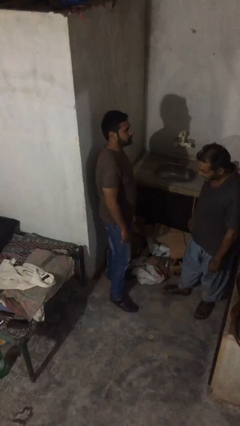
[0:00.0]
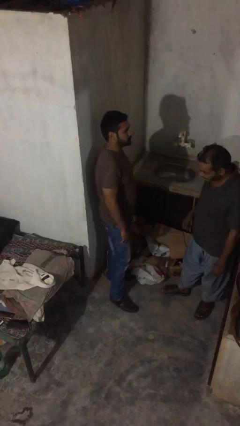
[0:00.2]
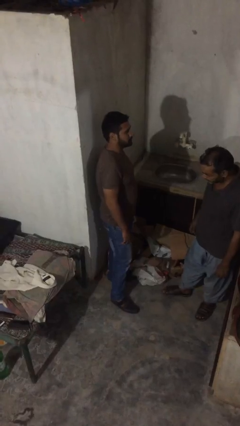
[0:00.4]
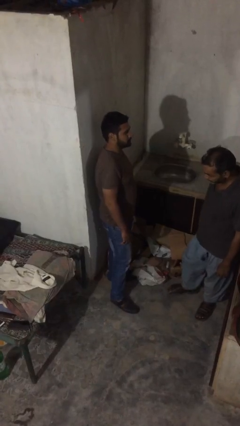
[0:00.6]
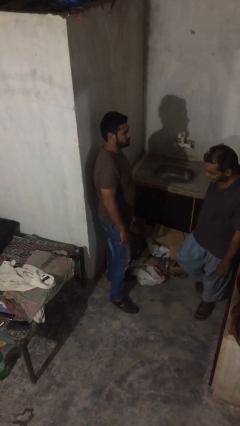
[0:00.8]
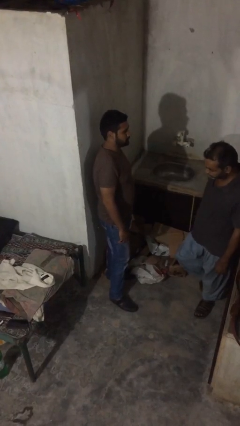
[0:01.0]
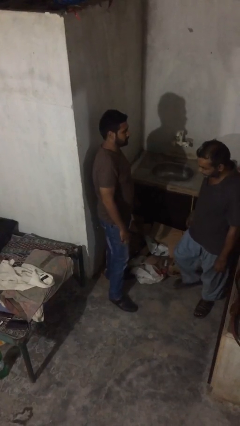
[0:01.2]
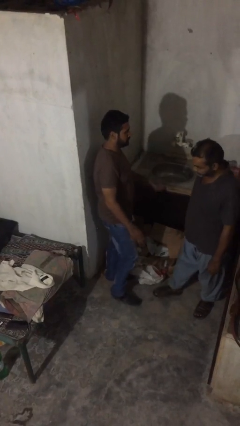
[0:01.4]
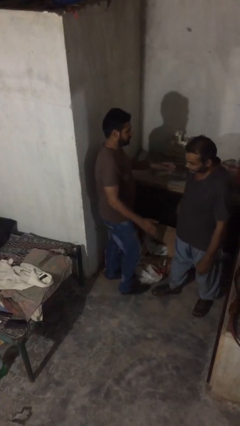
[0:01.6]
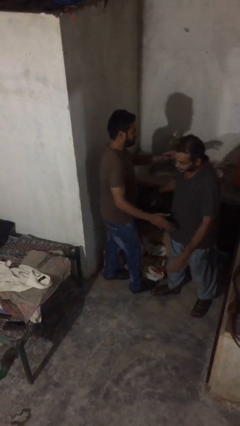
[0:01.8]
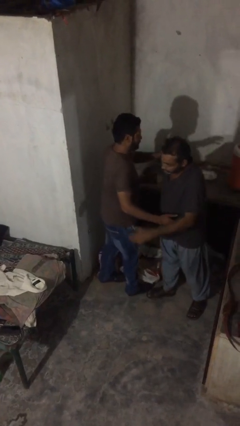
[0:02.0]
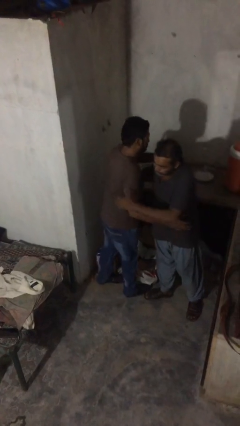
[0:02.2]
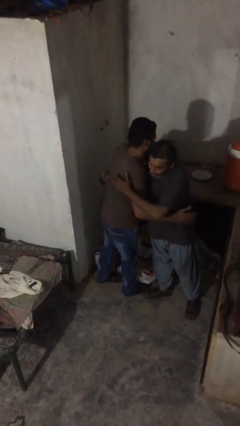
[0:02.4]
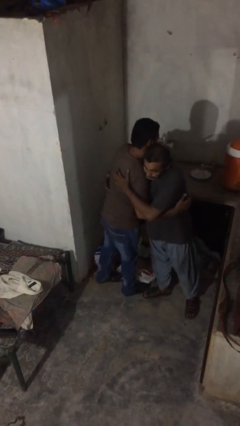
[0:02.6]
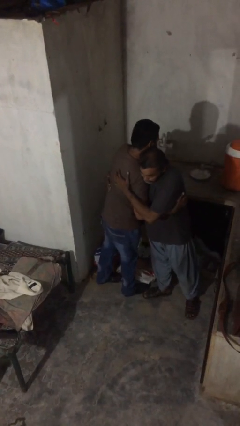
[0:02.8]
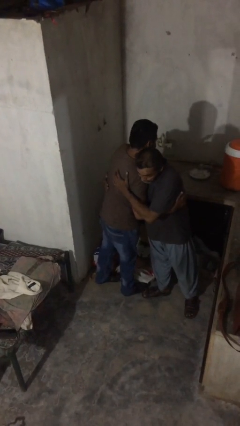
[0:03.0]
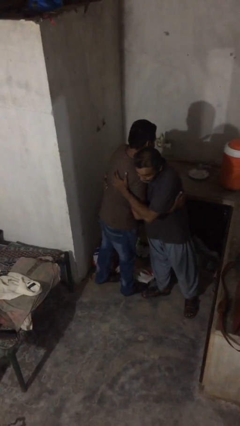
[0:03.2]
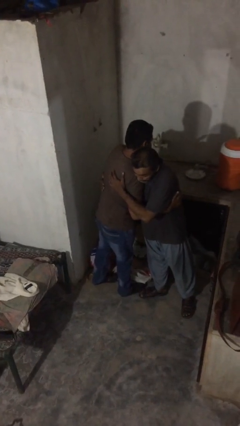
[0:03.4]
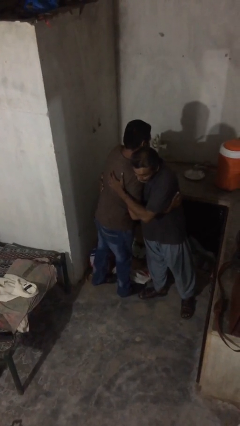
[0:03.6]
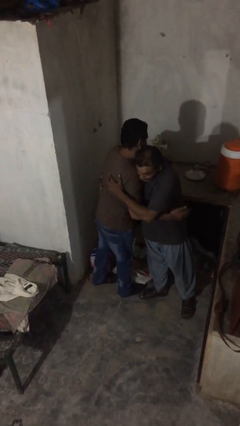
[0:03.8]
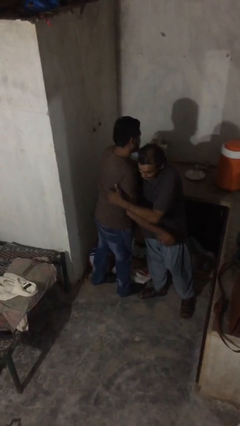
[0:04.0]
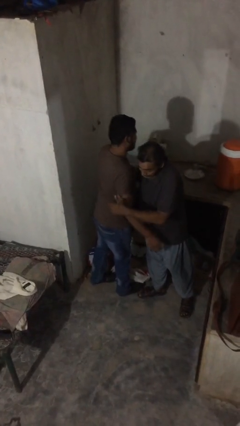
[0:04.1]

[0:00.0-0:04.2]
person embraces person

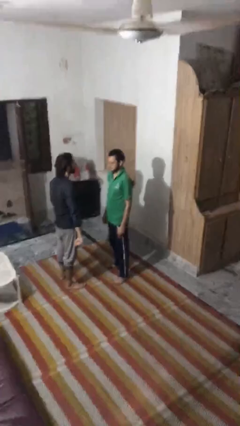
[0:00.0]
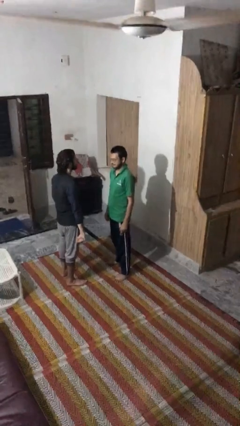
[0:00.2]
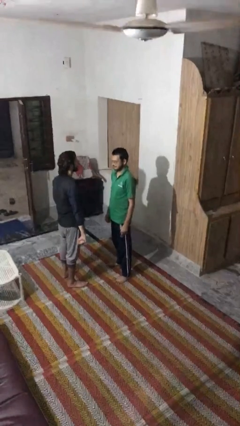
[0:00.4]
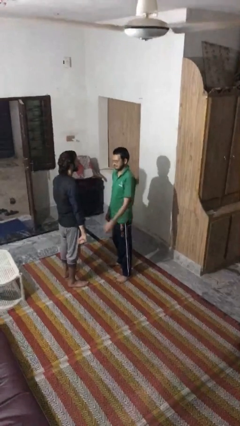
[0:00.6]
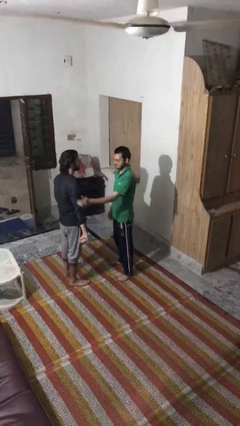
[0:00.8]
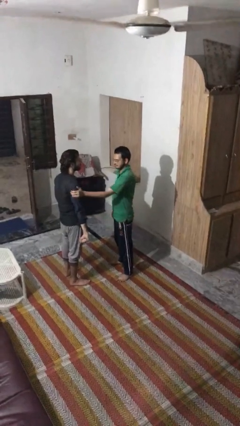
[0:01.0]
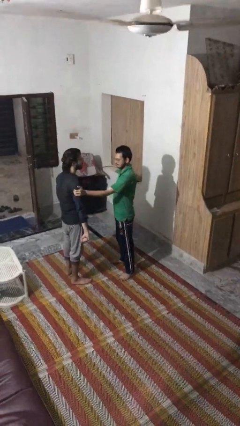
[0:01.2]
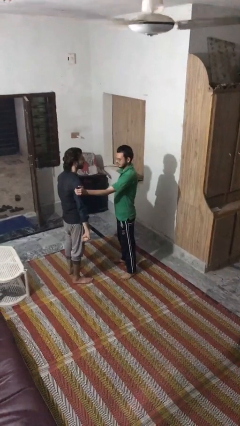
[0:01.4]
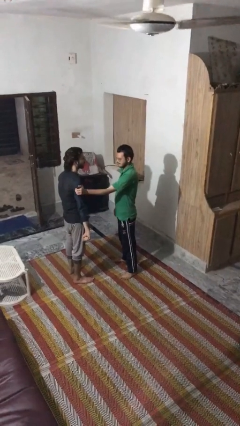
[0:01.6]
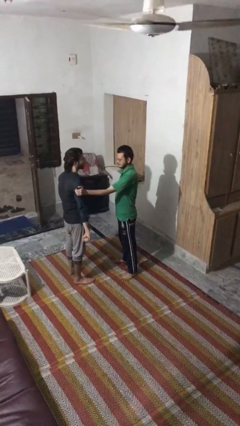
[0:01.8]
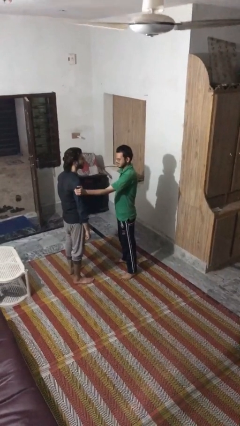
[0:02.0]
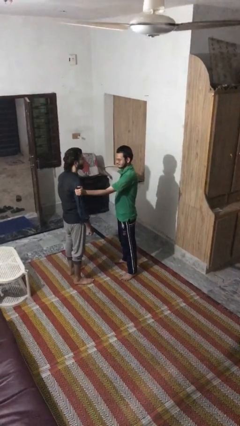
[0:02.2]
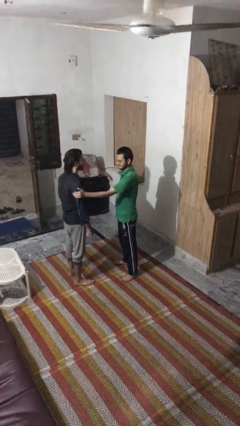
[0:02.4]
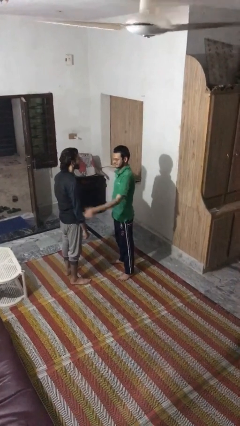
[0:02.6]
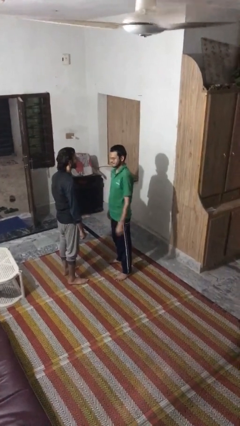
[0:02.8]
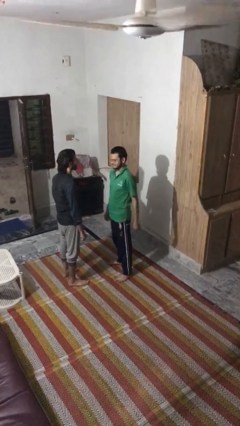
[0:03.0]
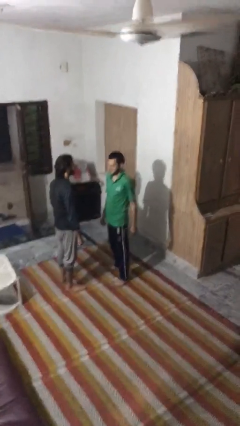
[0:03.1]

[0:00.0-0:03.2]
person grabs person by bicep

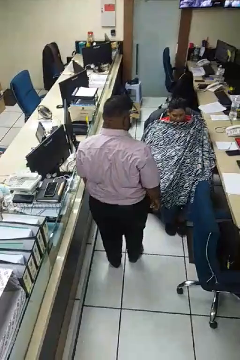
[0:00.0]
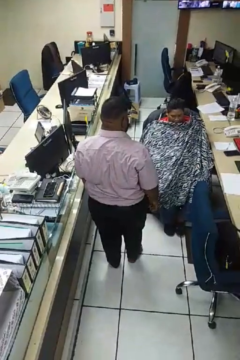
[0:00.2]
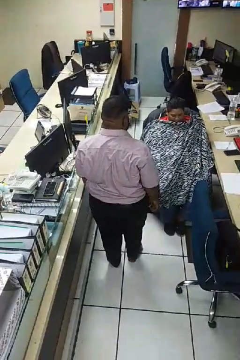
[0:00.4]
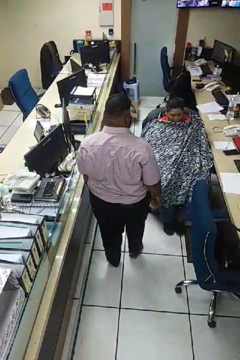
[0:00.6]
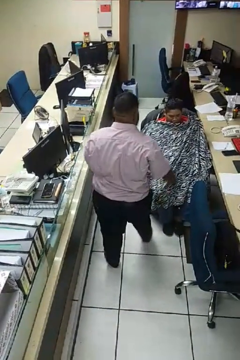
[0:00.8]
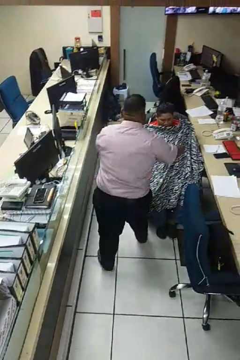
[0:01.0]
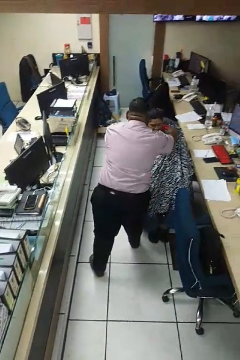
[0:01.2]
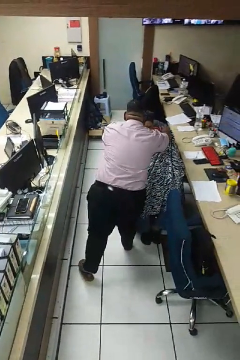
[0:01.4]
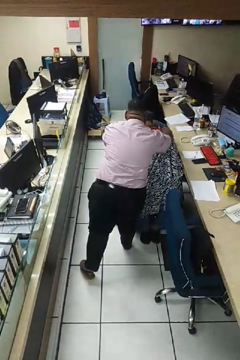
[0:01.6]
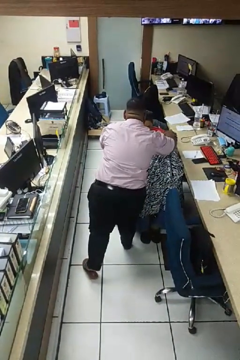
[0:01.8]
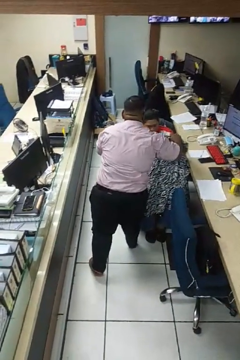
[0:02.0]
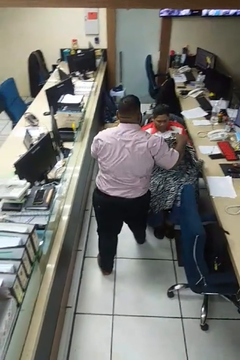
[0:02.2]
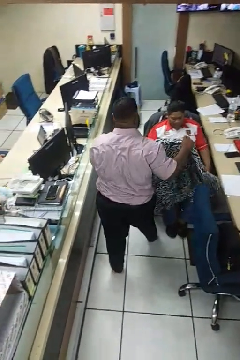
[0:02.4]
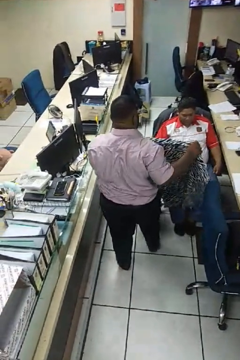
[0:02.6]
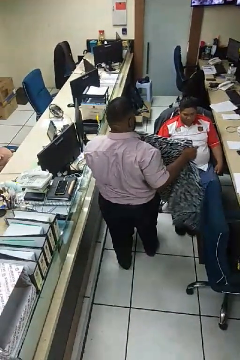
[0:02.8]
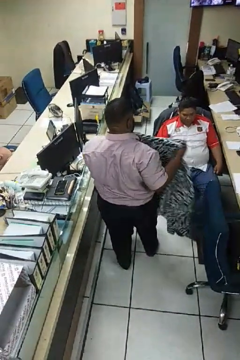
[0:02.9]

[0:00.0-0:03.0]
person uncovers friend with blanket

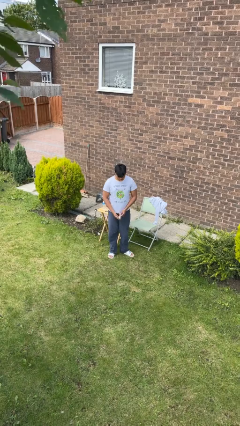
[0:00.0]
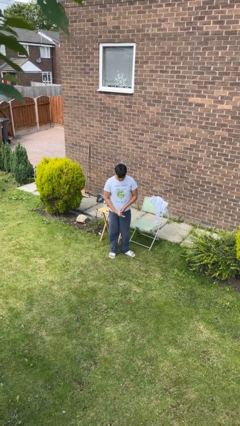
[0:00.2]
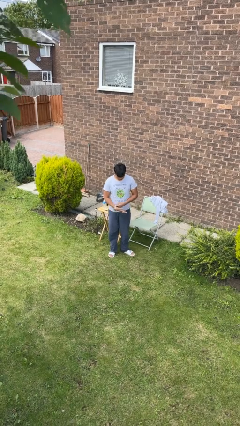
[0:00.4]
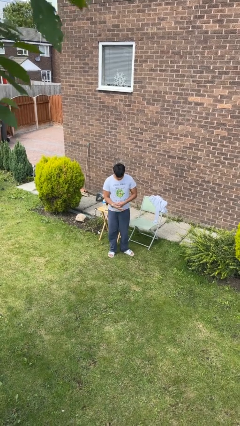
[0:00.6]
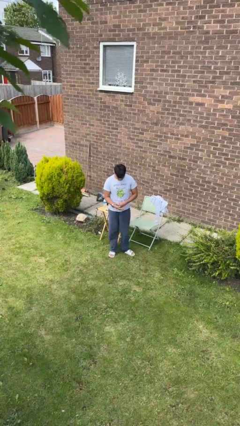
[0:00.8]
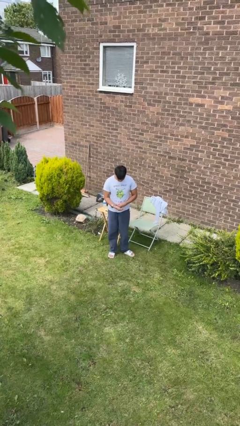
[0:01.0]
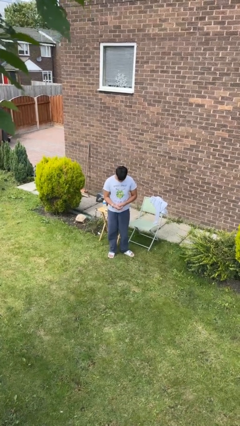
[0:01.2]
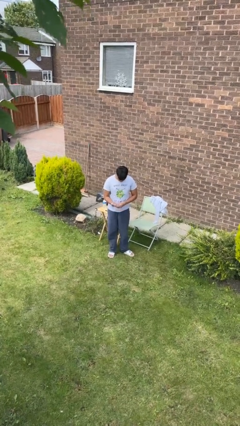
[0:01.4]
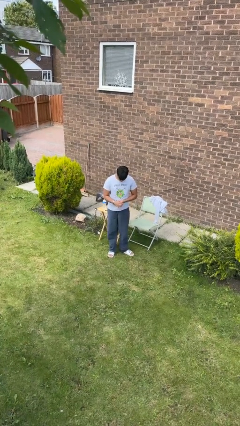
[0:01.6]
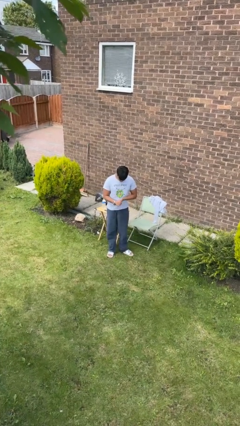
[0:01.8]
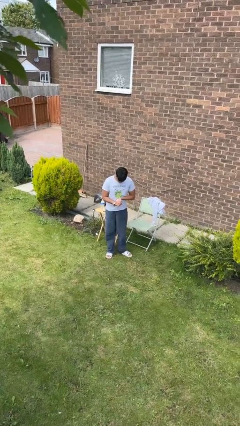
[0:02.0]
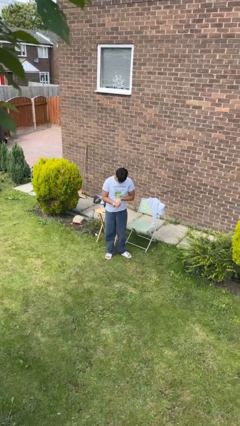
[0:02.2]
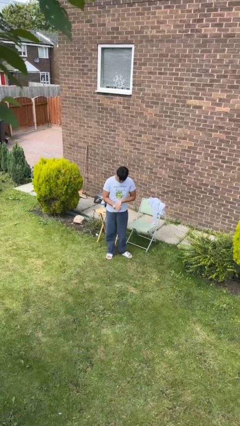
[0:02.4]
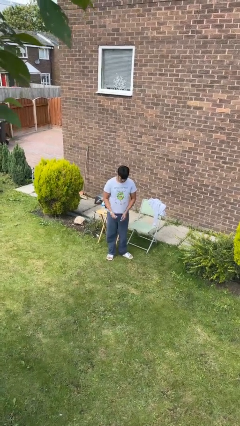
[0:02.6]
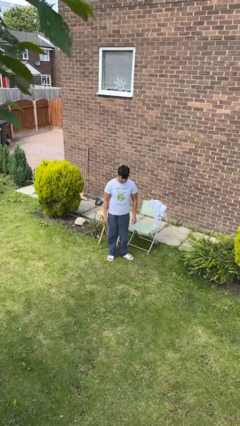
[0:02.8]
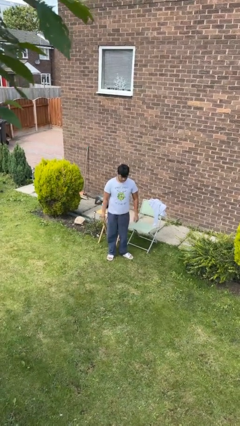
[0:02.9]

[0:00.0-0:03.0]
person puts on wristwatch

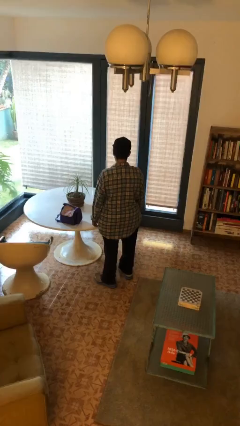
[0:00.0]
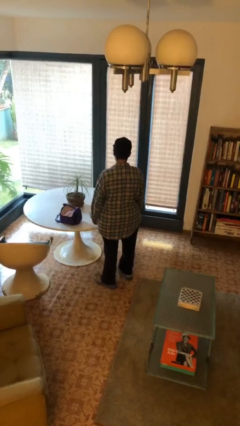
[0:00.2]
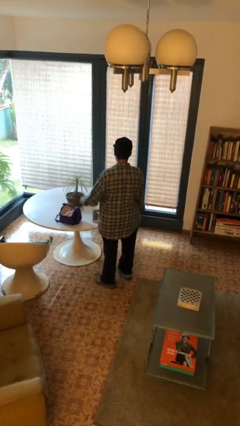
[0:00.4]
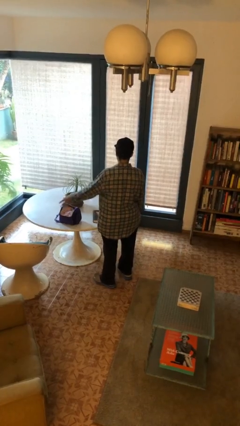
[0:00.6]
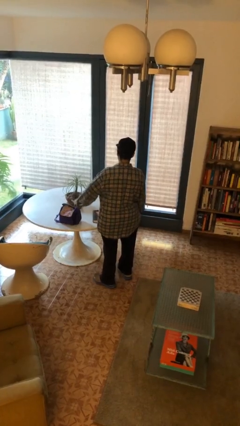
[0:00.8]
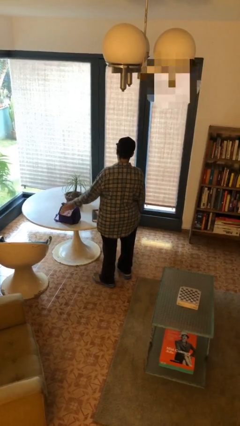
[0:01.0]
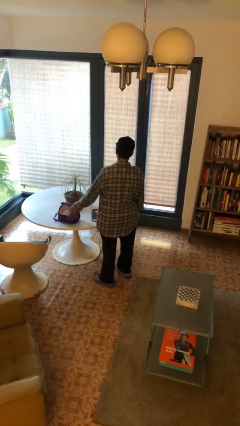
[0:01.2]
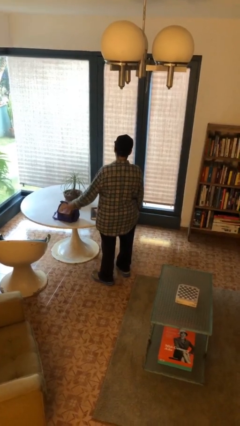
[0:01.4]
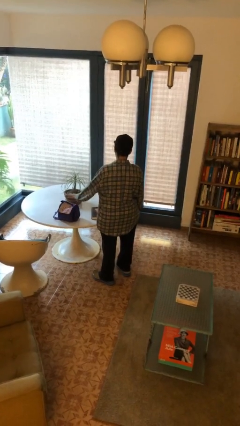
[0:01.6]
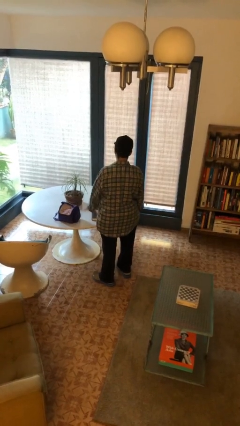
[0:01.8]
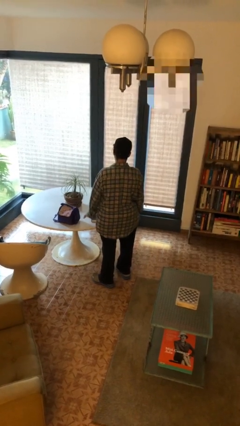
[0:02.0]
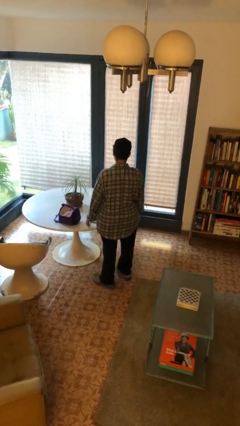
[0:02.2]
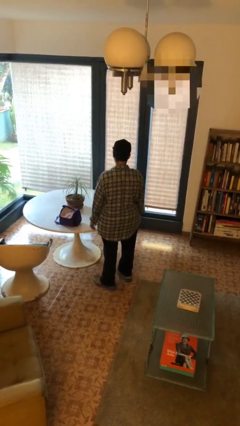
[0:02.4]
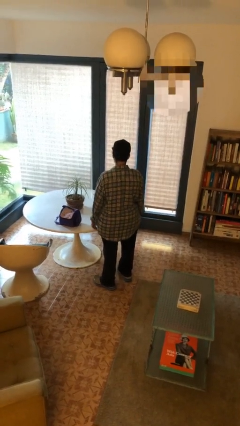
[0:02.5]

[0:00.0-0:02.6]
person waves hand over object

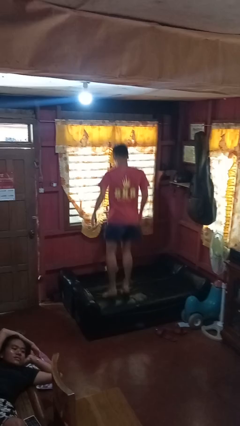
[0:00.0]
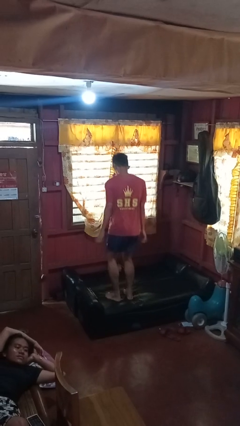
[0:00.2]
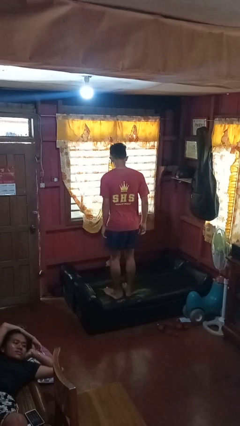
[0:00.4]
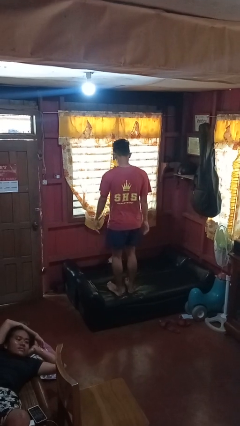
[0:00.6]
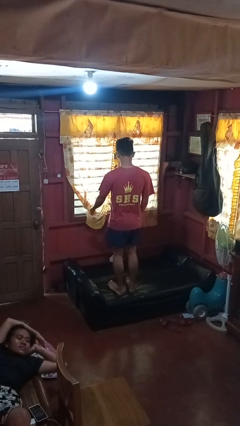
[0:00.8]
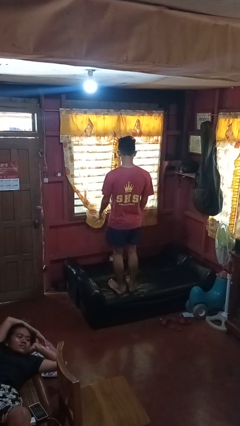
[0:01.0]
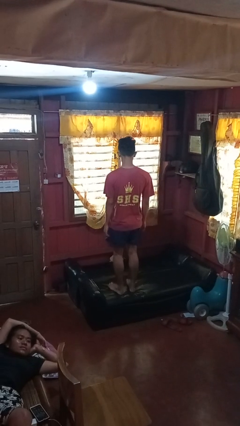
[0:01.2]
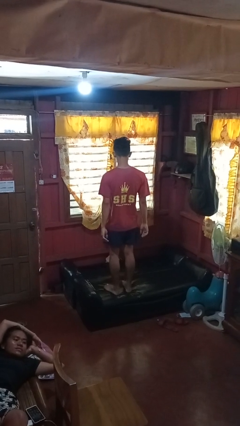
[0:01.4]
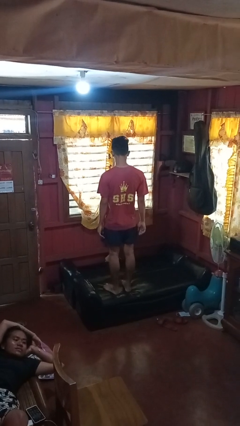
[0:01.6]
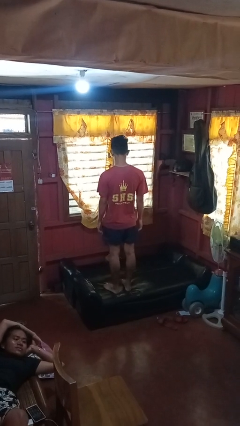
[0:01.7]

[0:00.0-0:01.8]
person jumps on couch
